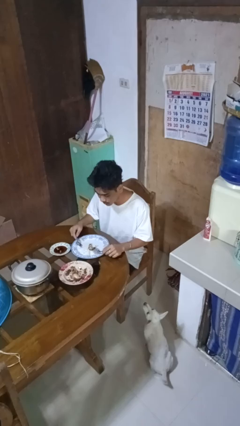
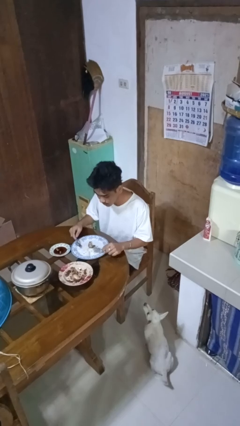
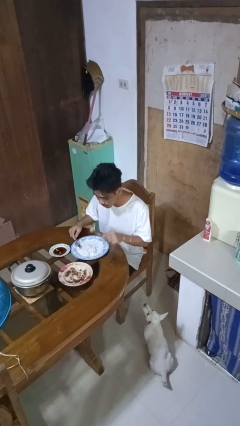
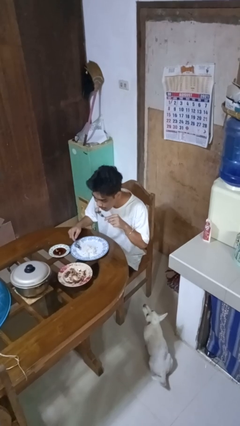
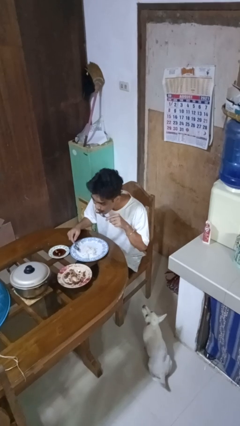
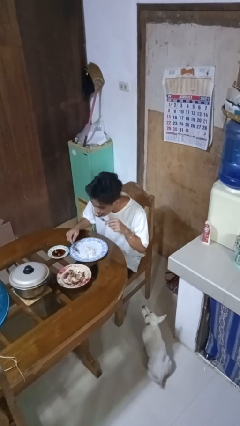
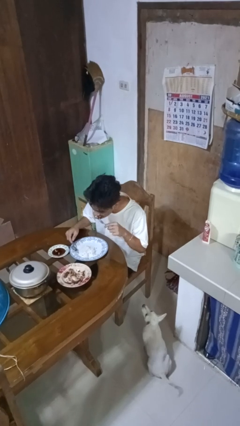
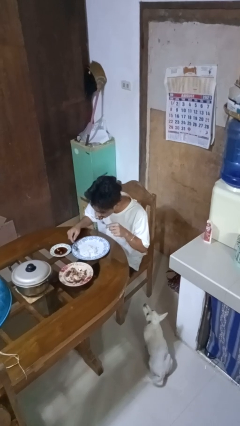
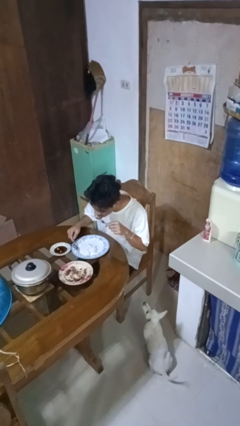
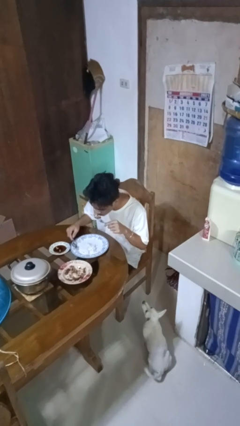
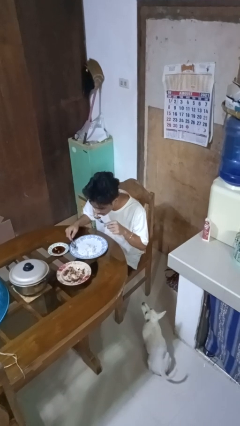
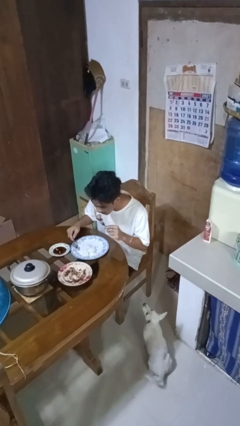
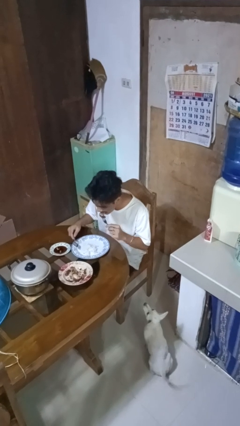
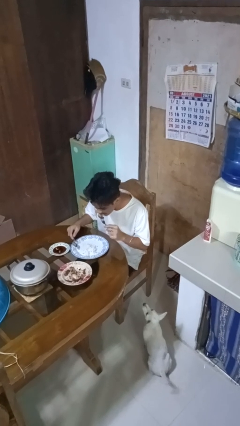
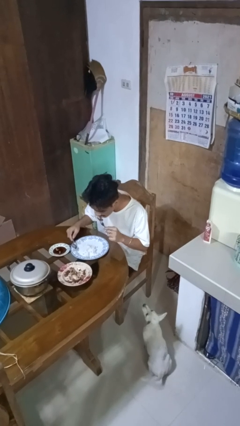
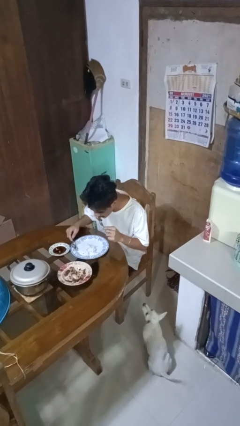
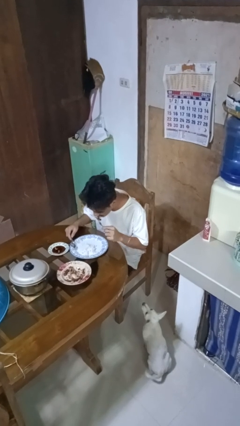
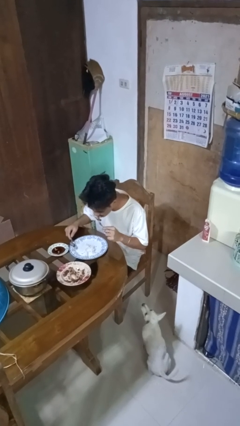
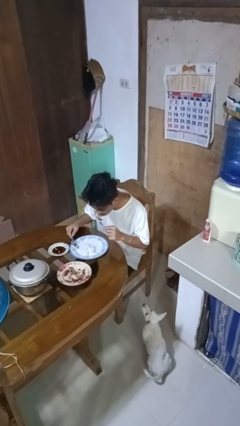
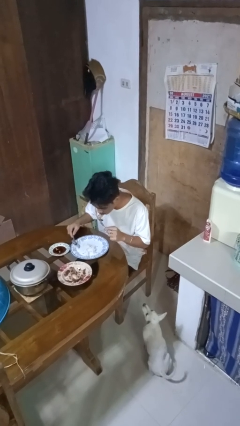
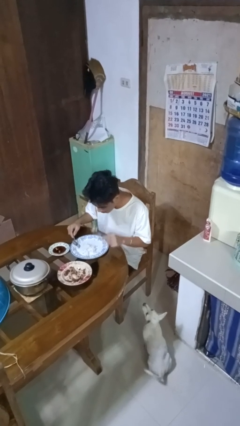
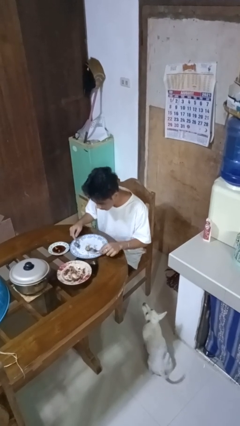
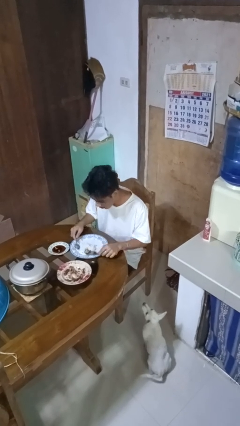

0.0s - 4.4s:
person eats with utensil

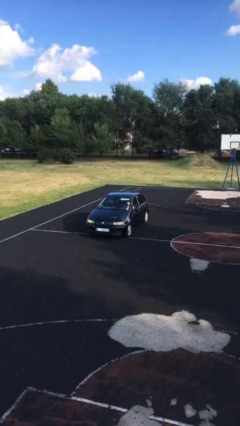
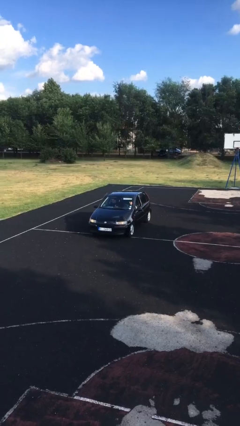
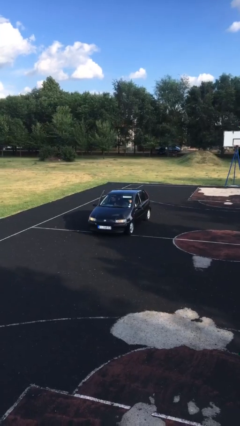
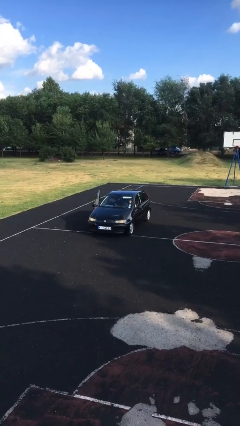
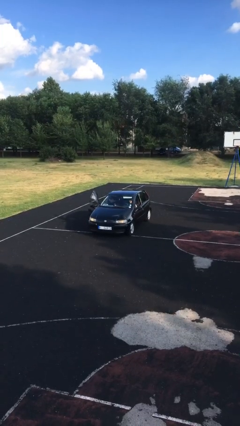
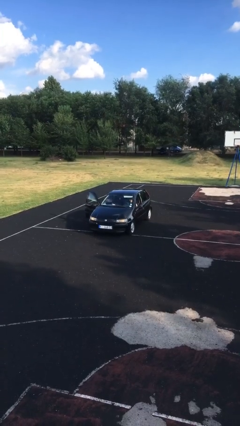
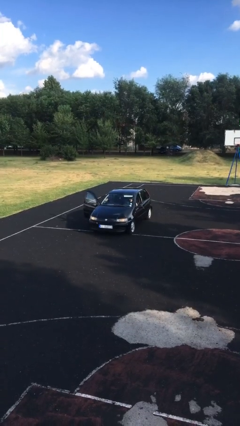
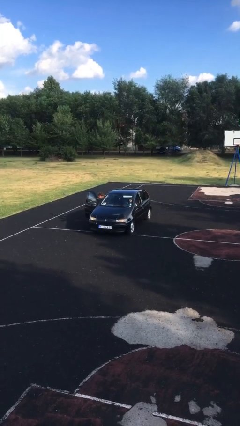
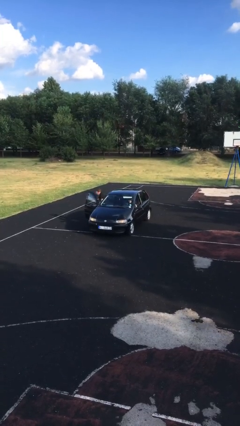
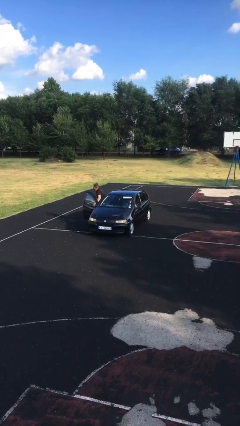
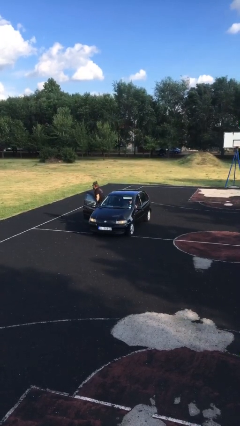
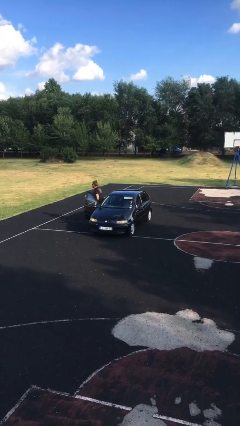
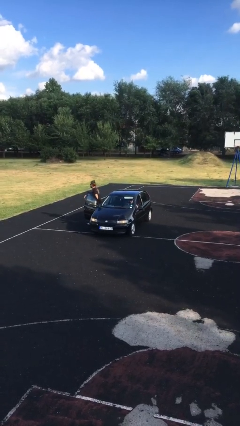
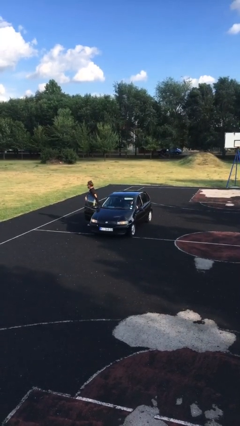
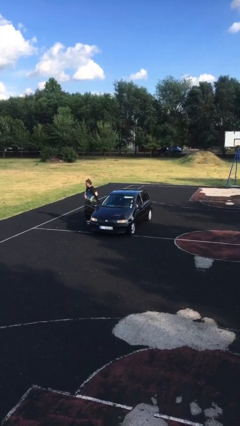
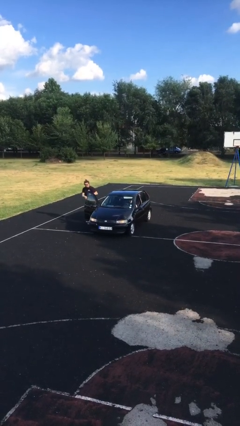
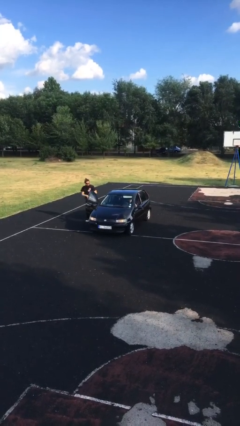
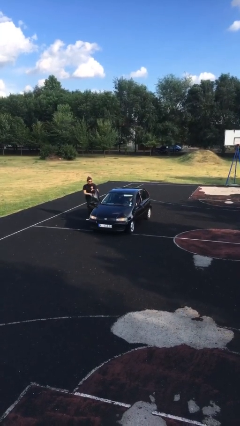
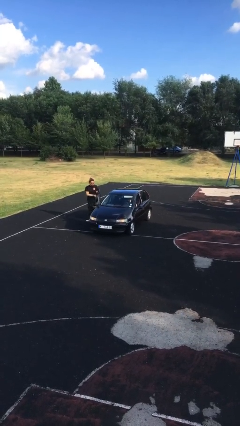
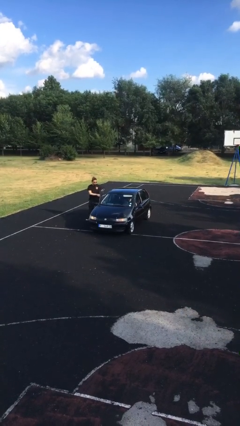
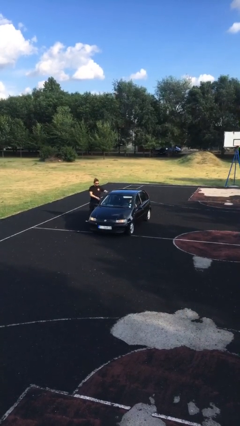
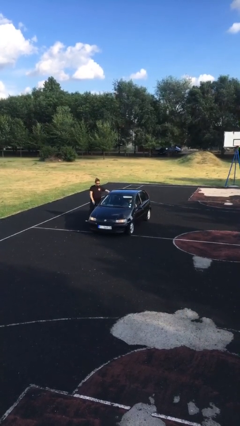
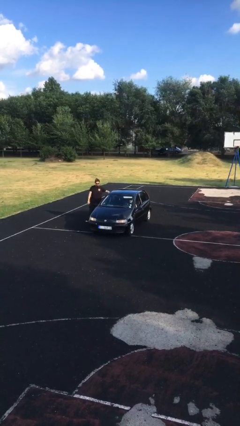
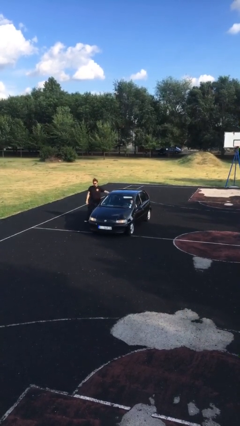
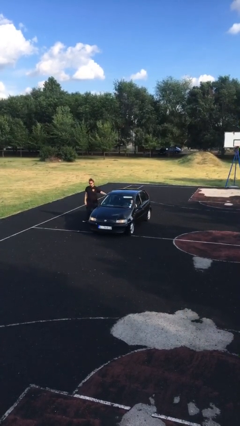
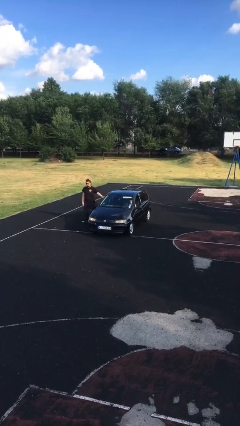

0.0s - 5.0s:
car drops off person

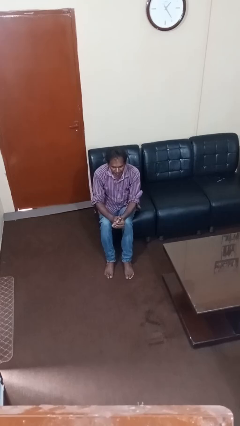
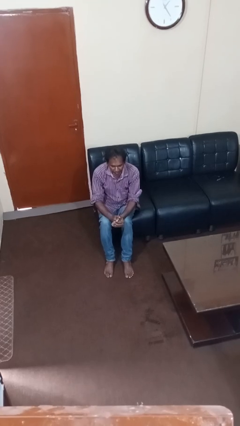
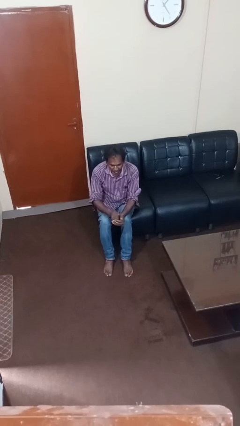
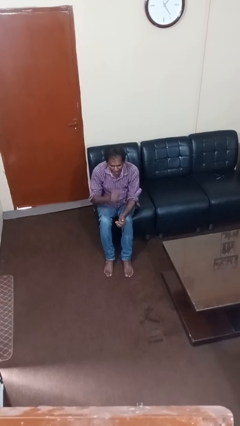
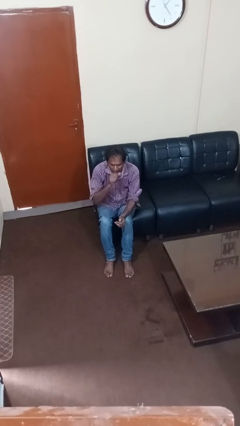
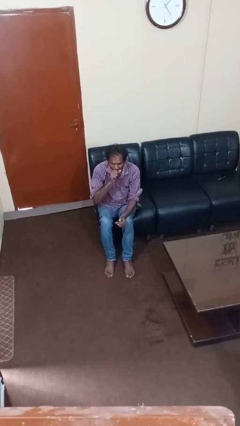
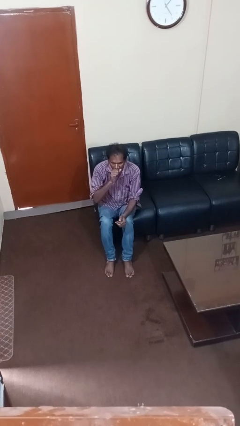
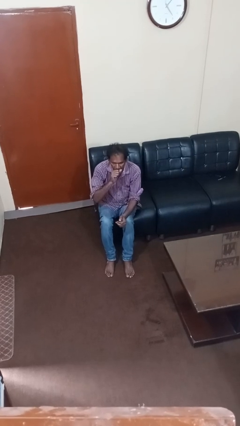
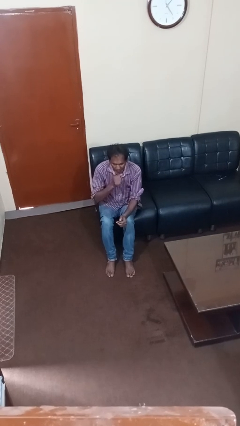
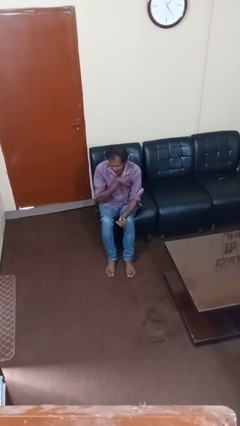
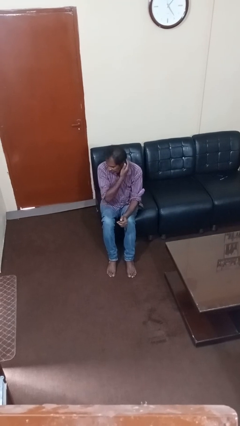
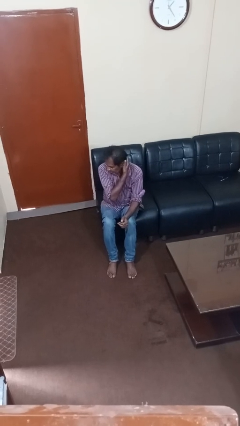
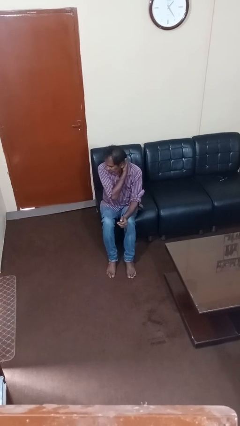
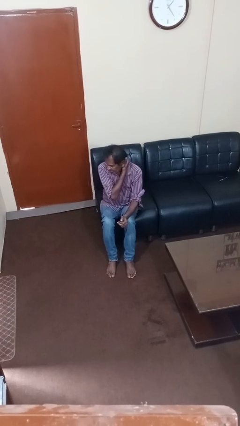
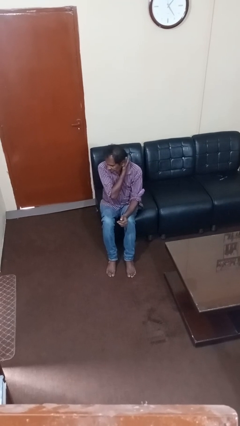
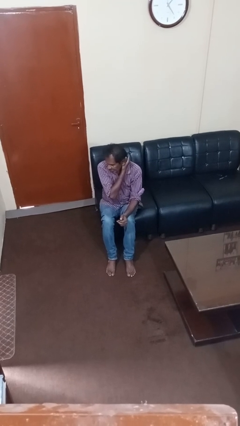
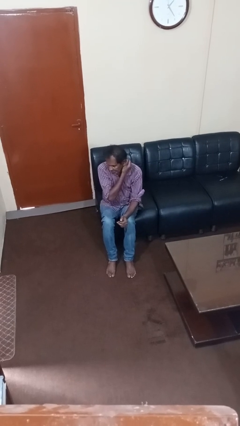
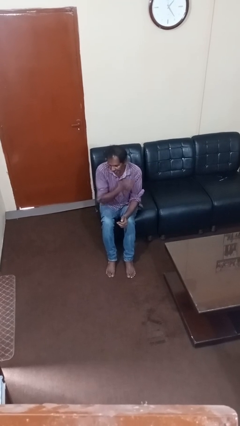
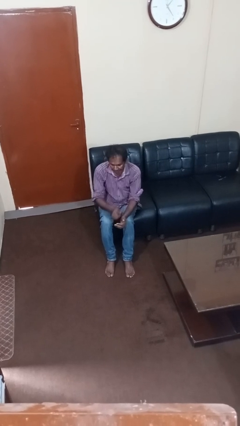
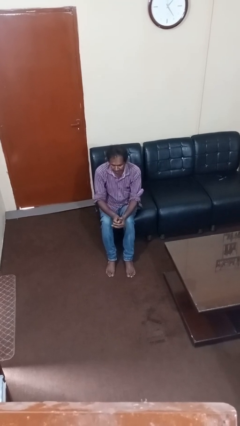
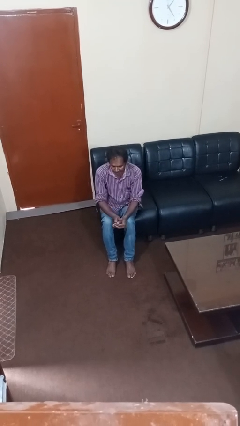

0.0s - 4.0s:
person yawns

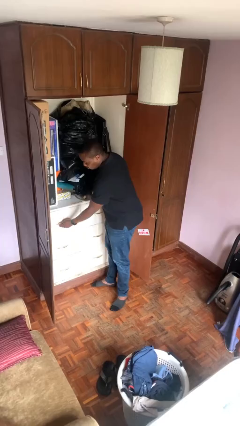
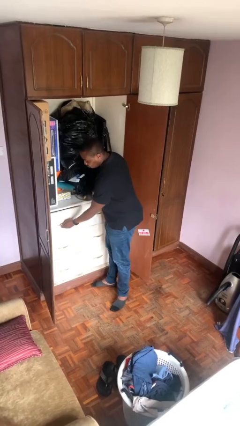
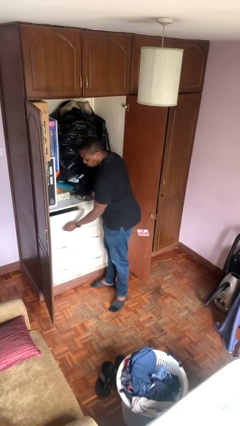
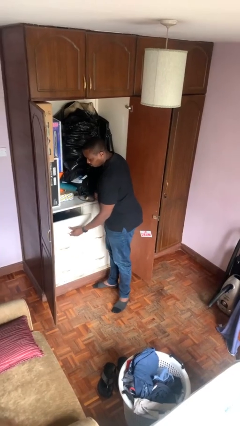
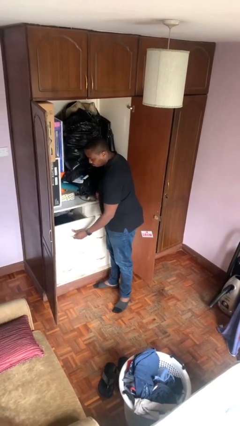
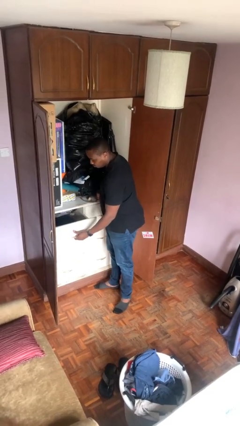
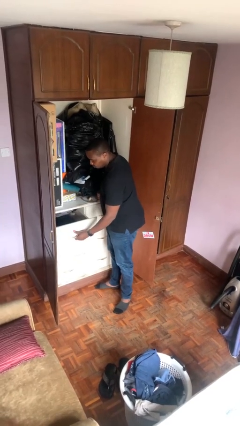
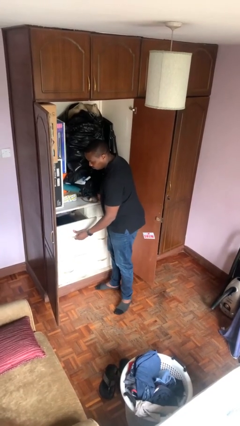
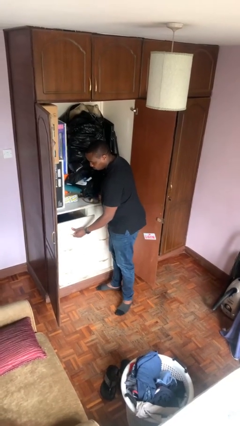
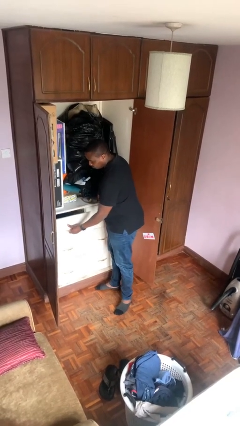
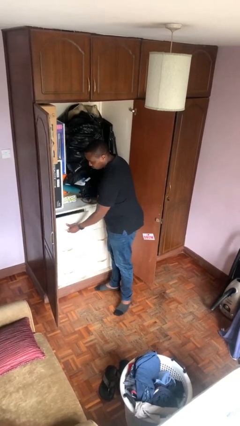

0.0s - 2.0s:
person opens dresser drawer

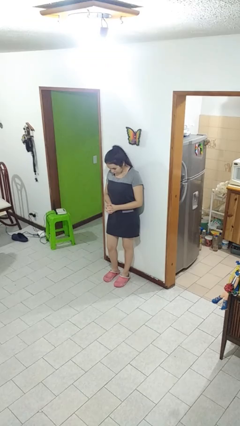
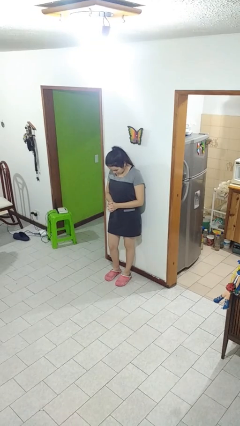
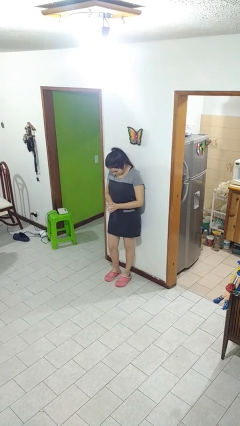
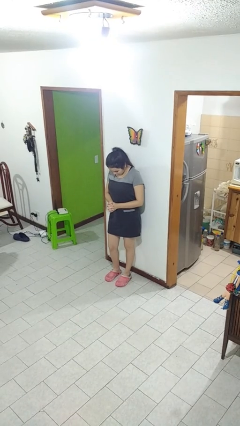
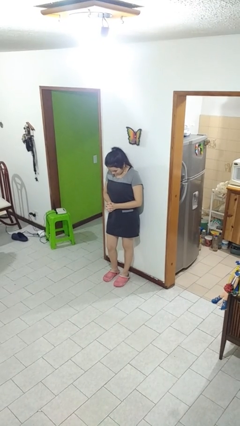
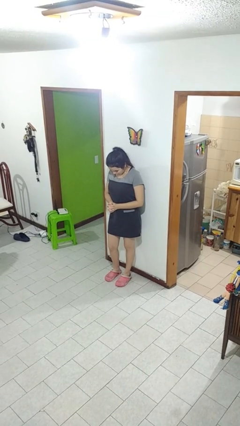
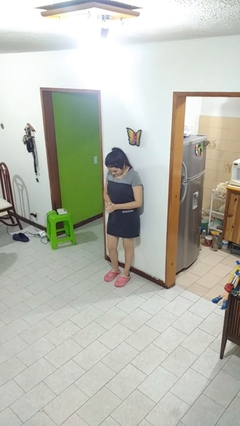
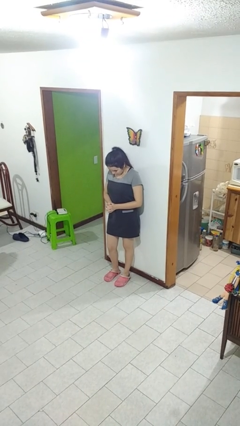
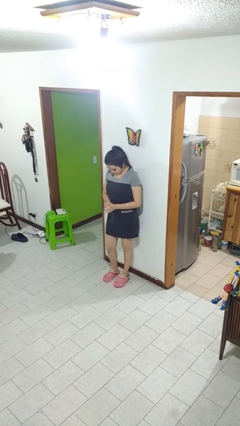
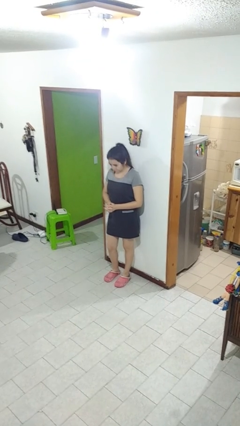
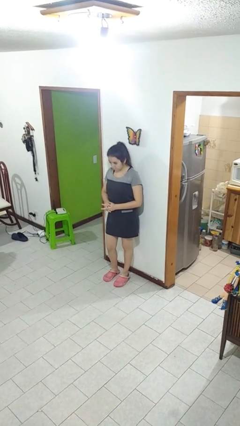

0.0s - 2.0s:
person prays

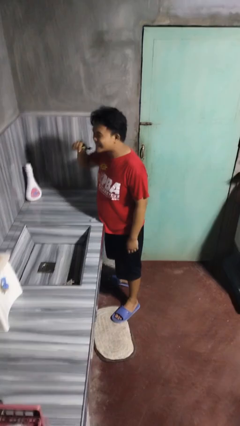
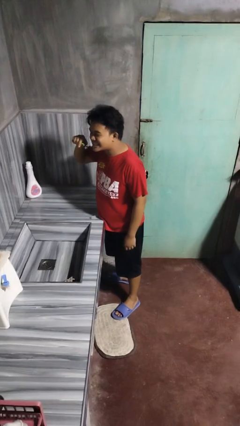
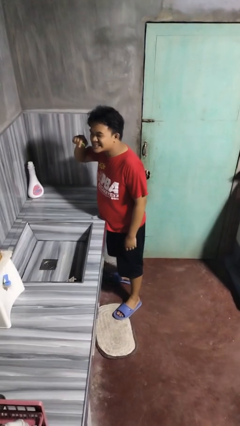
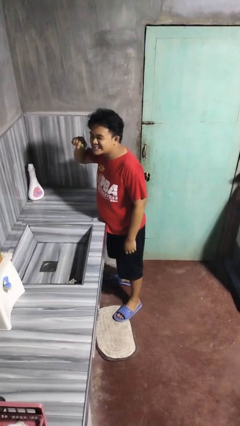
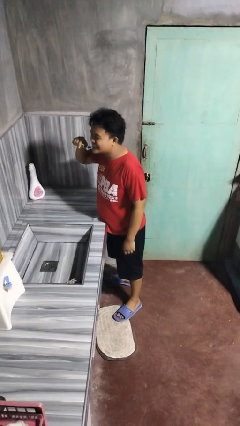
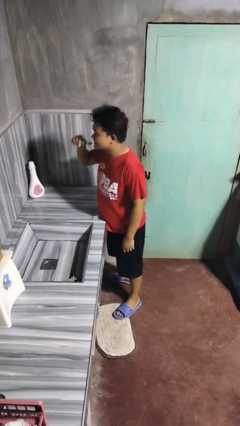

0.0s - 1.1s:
person brushes teeth
